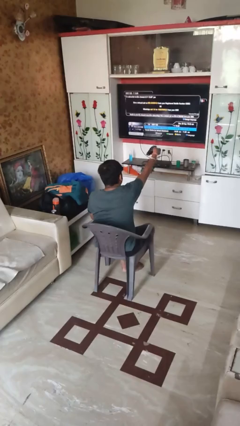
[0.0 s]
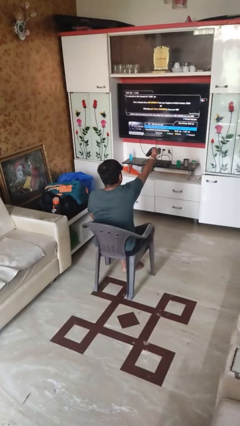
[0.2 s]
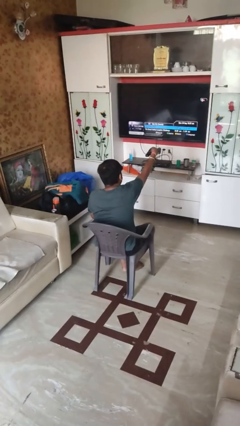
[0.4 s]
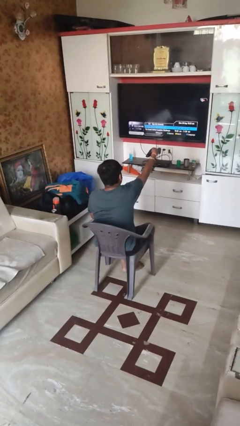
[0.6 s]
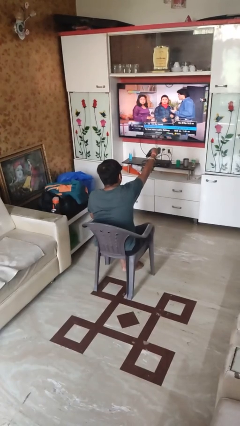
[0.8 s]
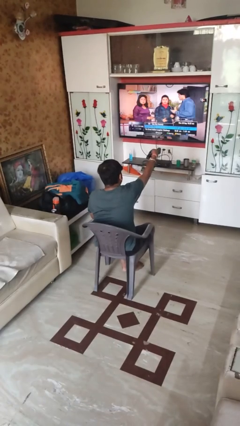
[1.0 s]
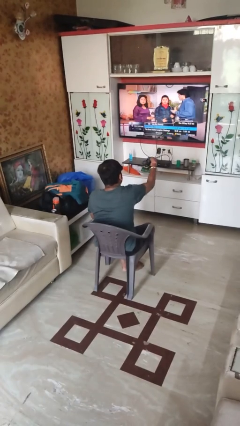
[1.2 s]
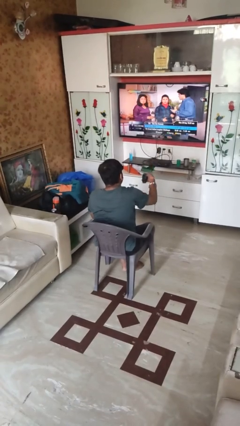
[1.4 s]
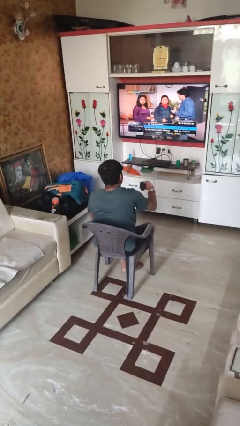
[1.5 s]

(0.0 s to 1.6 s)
person uses television remote

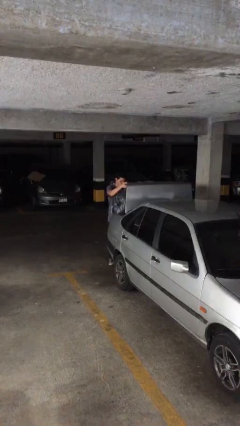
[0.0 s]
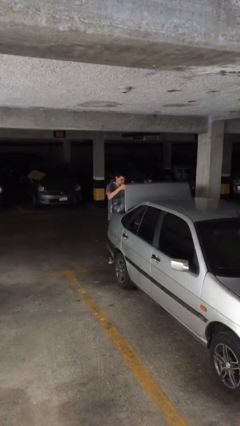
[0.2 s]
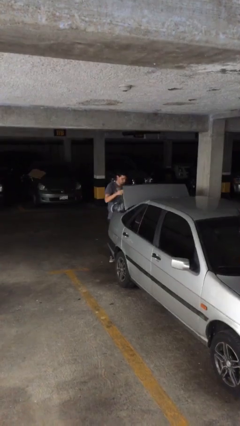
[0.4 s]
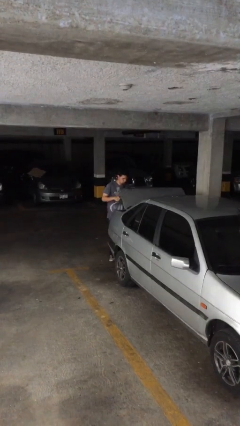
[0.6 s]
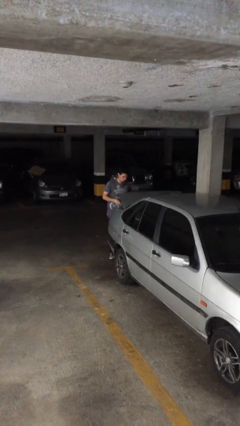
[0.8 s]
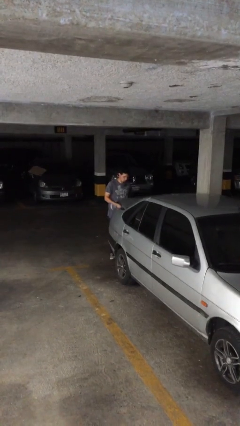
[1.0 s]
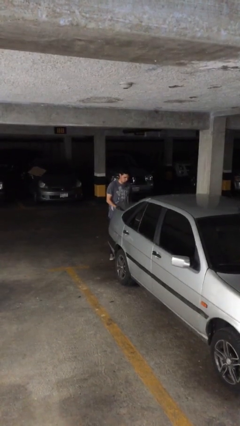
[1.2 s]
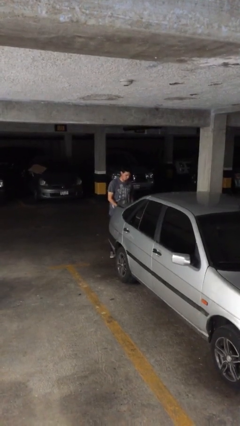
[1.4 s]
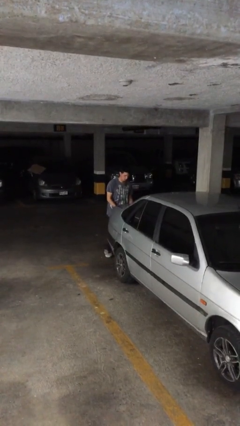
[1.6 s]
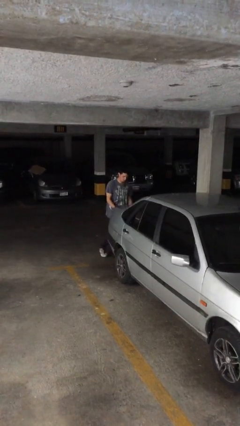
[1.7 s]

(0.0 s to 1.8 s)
person closes car trunk

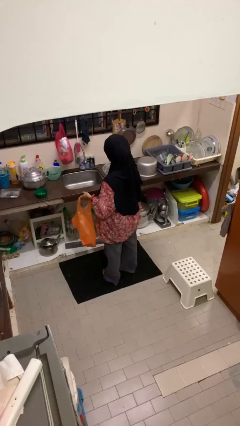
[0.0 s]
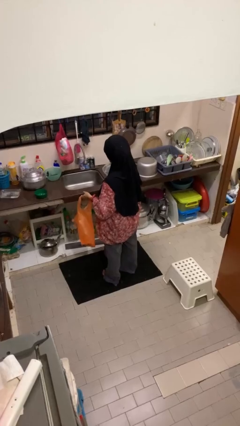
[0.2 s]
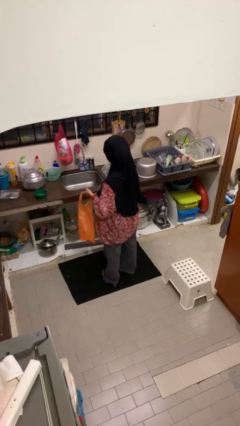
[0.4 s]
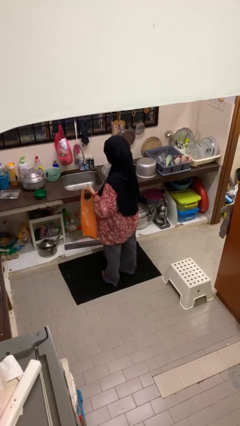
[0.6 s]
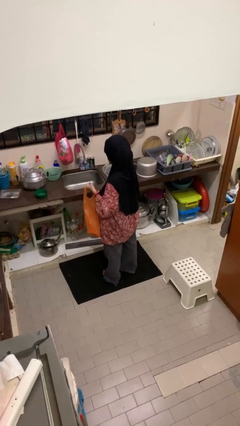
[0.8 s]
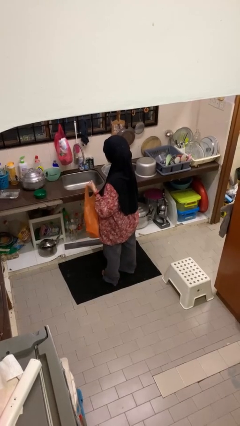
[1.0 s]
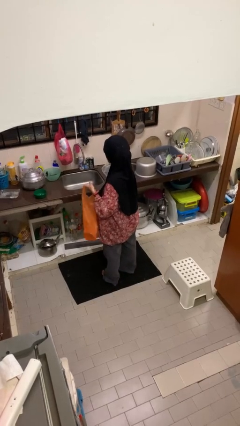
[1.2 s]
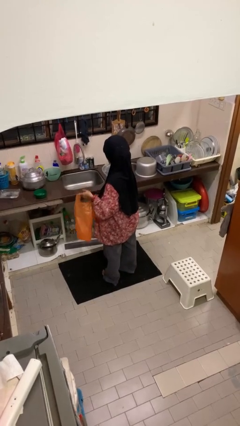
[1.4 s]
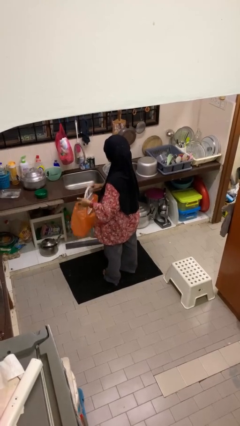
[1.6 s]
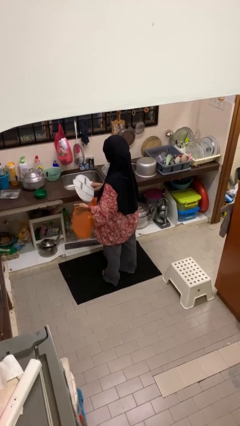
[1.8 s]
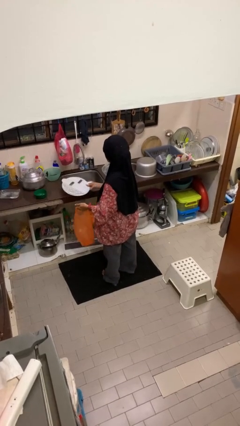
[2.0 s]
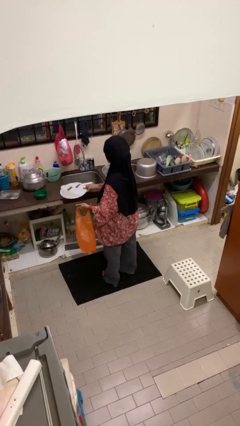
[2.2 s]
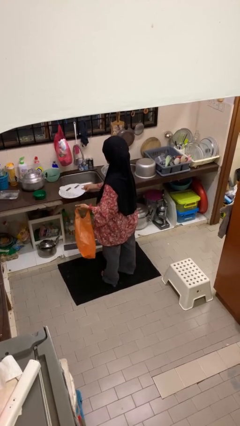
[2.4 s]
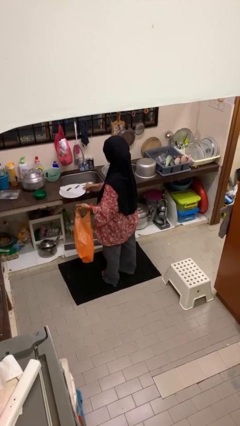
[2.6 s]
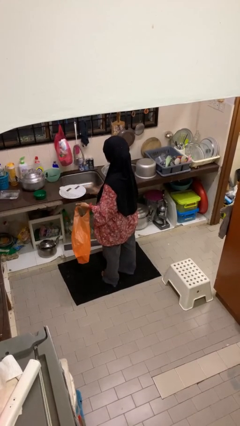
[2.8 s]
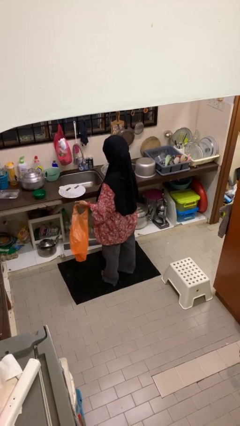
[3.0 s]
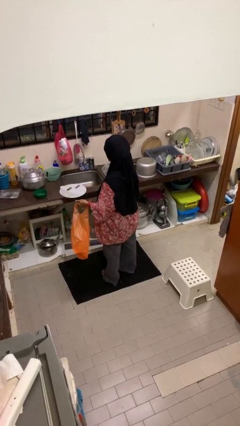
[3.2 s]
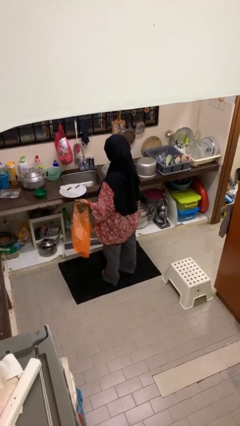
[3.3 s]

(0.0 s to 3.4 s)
person takes object from bag

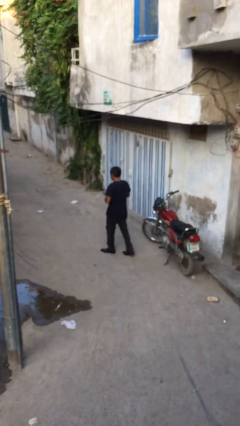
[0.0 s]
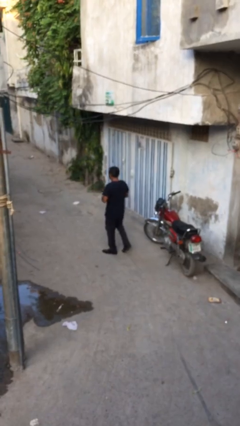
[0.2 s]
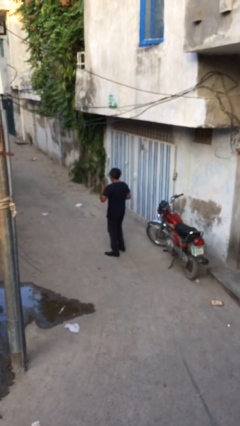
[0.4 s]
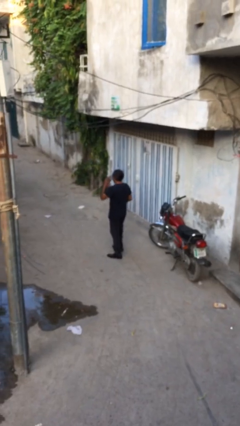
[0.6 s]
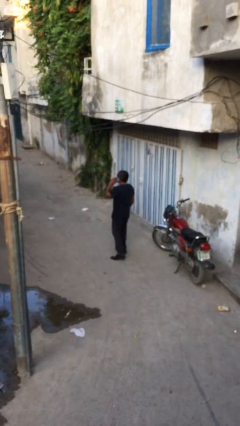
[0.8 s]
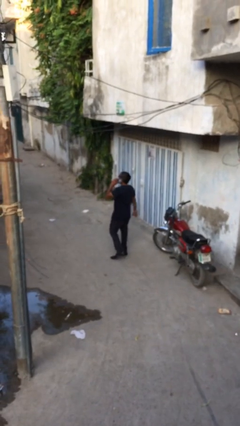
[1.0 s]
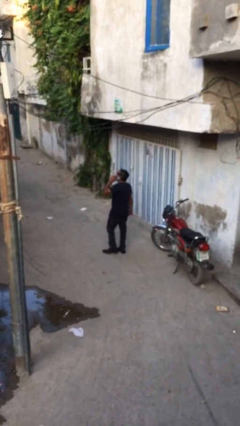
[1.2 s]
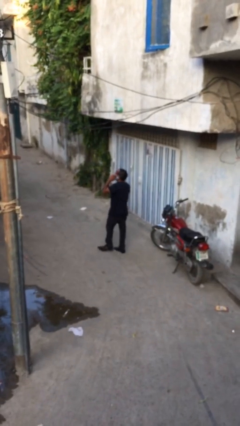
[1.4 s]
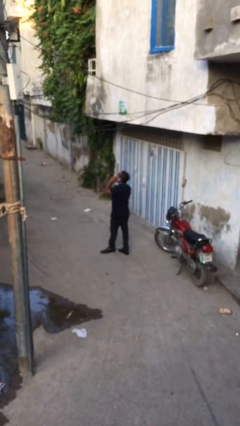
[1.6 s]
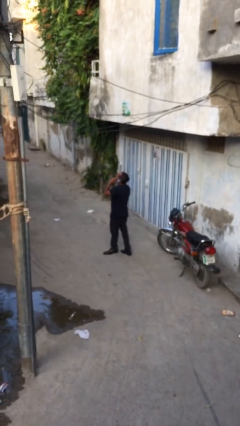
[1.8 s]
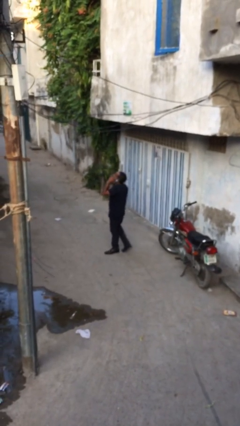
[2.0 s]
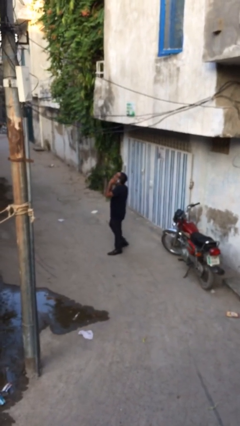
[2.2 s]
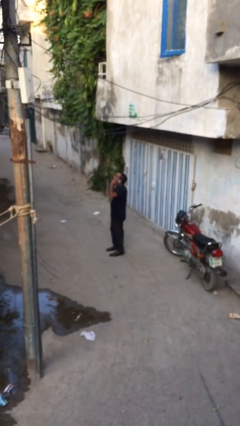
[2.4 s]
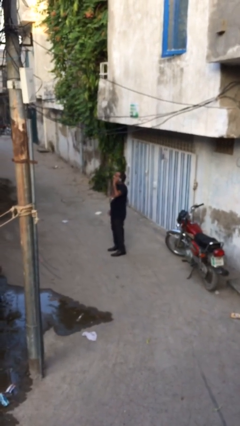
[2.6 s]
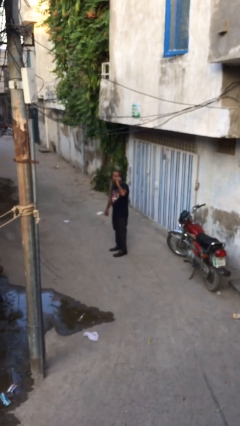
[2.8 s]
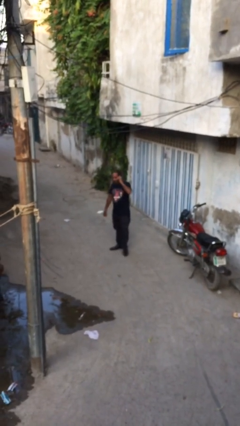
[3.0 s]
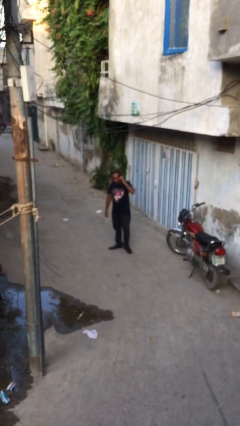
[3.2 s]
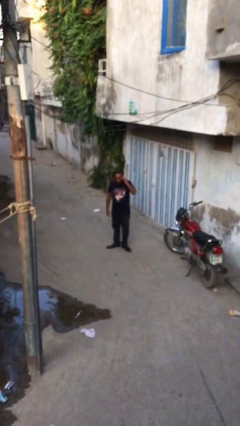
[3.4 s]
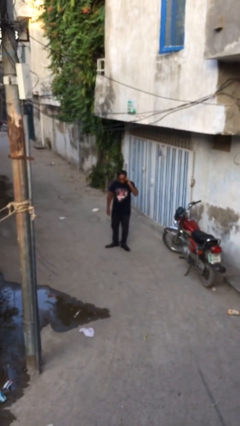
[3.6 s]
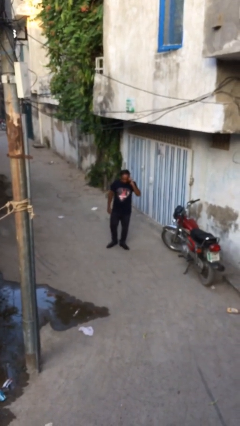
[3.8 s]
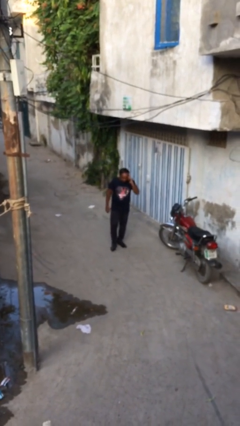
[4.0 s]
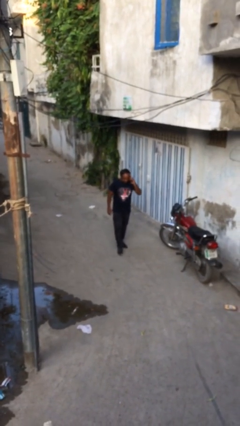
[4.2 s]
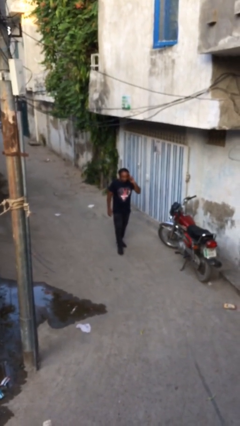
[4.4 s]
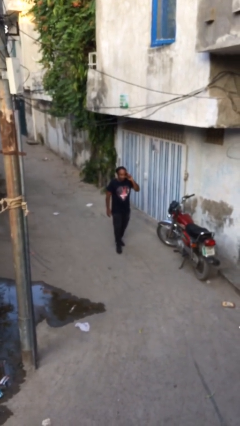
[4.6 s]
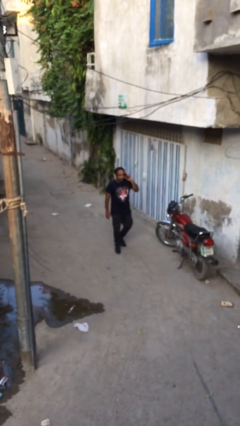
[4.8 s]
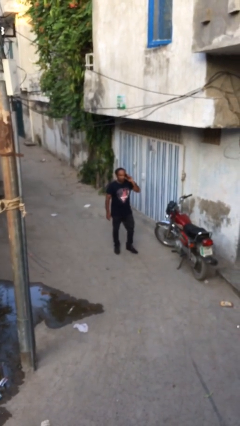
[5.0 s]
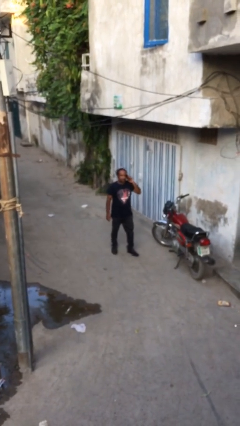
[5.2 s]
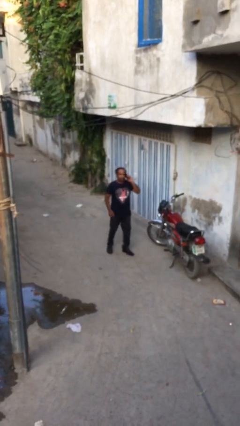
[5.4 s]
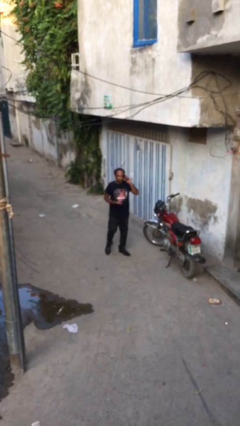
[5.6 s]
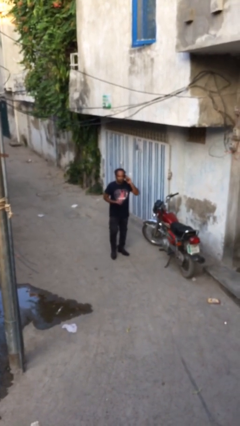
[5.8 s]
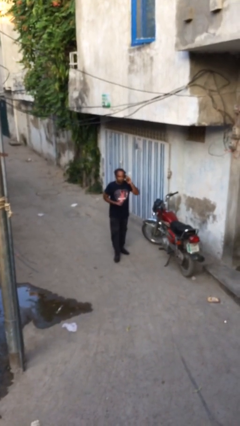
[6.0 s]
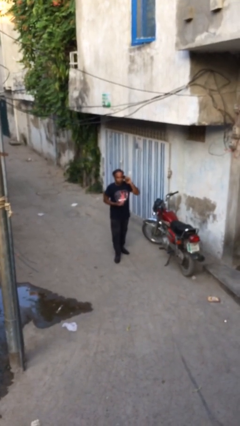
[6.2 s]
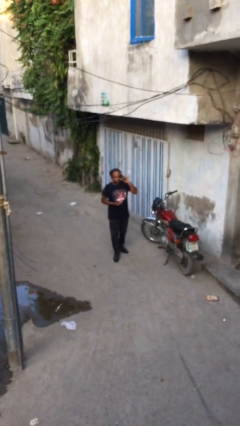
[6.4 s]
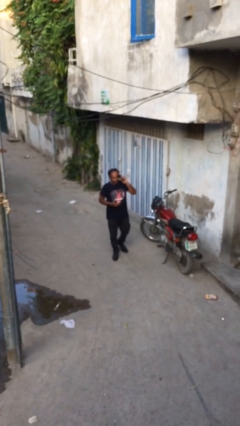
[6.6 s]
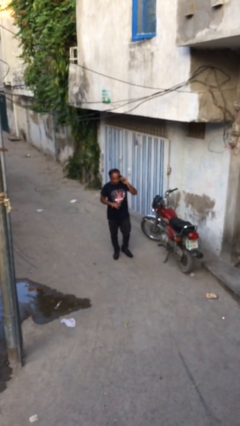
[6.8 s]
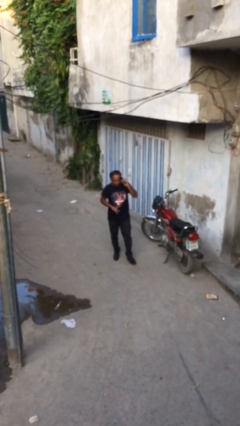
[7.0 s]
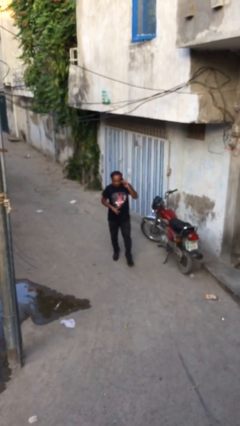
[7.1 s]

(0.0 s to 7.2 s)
person talks on phone

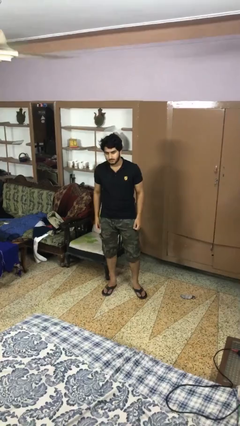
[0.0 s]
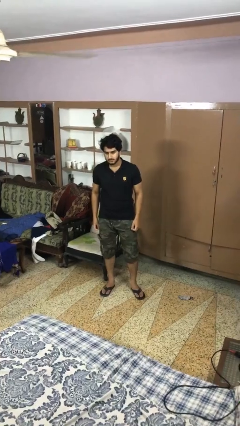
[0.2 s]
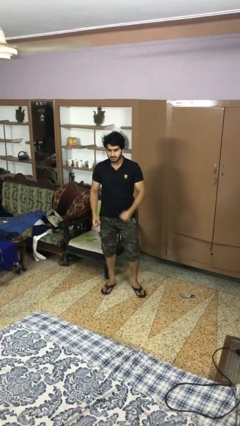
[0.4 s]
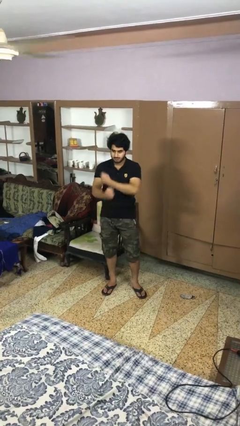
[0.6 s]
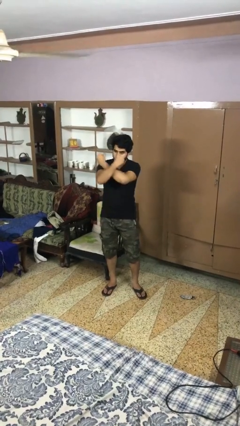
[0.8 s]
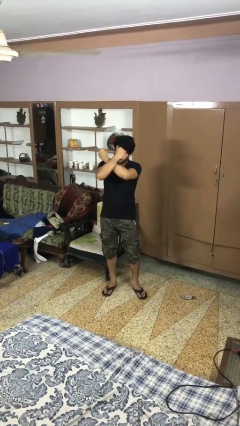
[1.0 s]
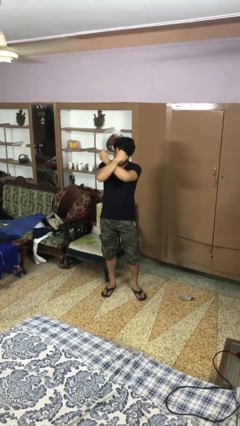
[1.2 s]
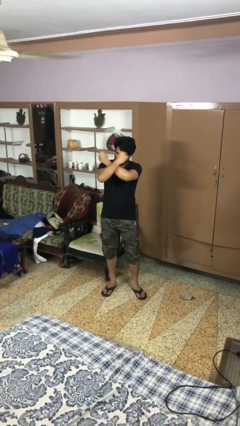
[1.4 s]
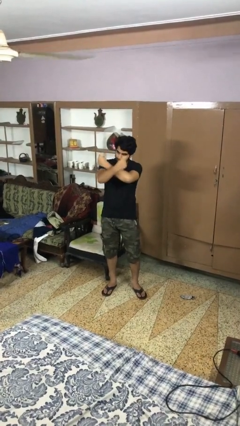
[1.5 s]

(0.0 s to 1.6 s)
person gestures arms x

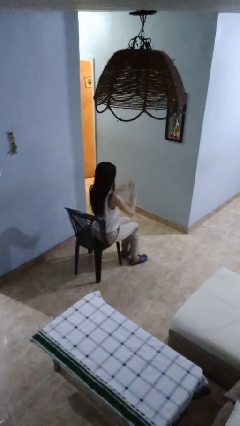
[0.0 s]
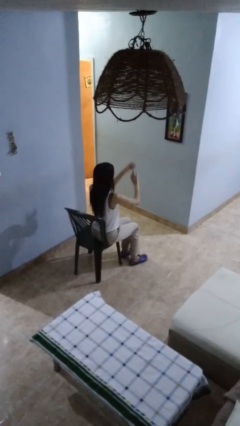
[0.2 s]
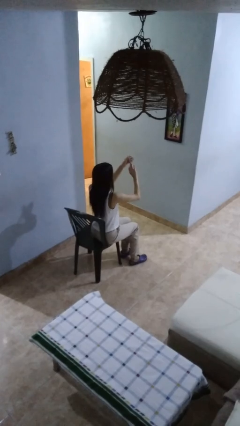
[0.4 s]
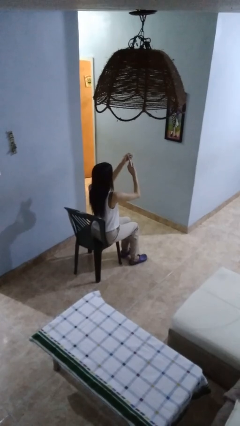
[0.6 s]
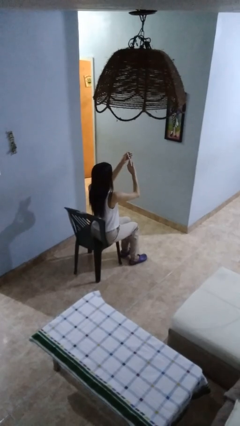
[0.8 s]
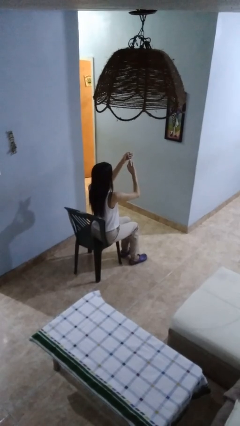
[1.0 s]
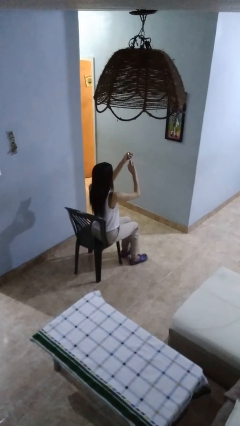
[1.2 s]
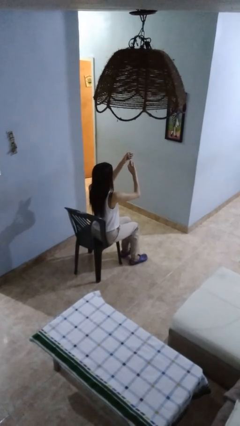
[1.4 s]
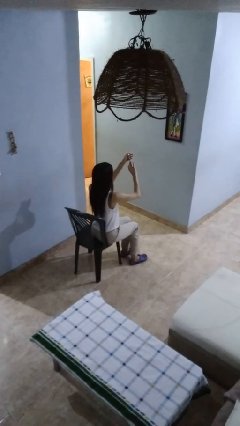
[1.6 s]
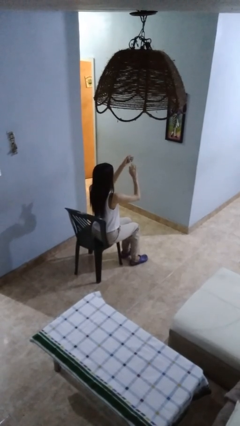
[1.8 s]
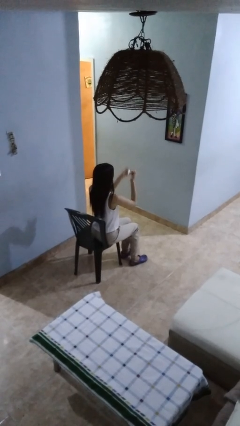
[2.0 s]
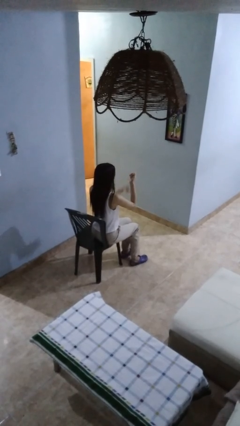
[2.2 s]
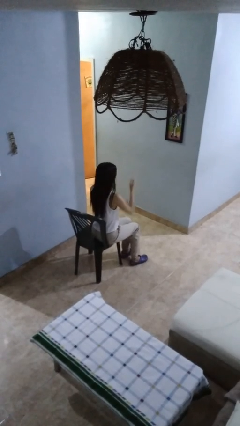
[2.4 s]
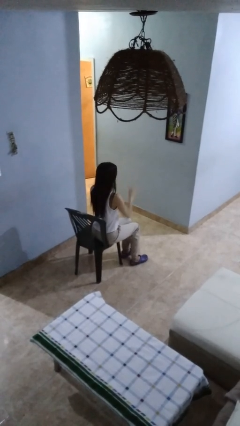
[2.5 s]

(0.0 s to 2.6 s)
person clips fingernails
